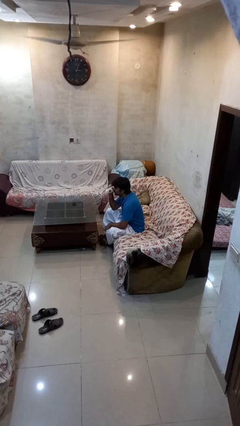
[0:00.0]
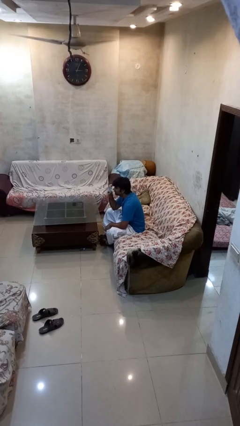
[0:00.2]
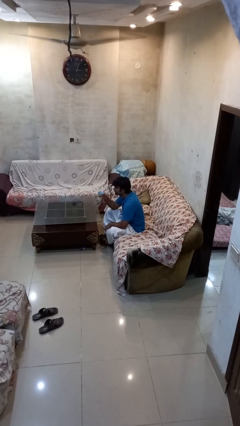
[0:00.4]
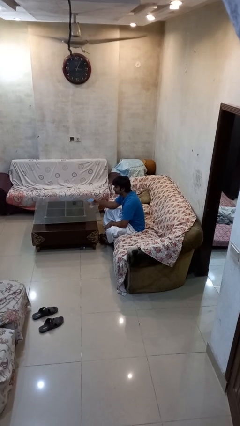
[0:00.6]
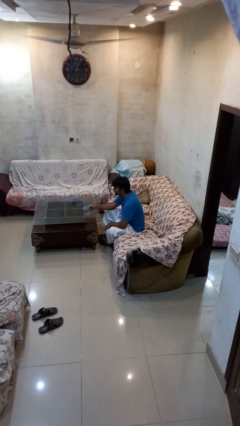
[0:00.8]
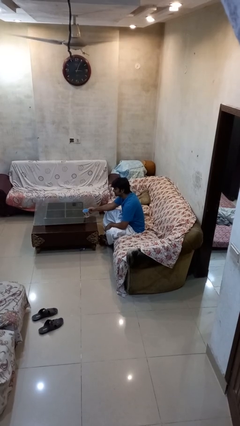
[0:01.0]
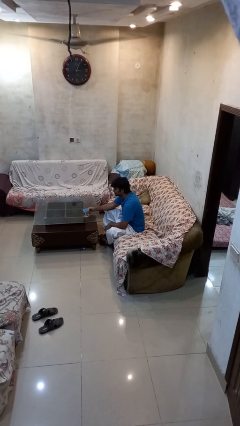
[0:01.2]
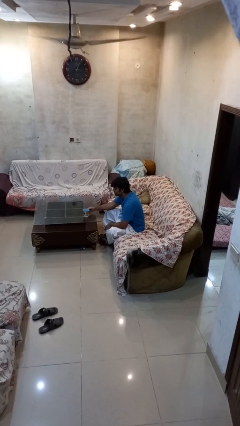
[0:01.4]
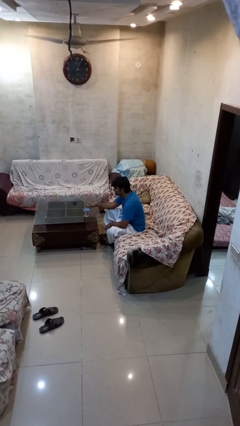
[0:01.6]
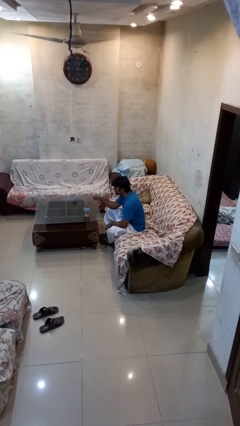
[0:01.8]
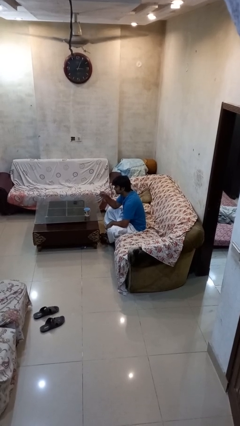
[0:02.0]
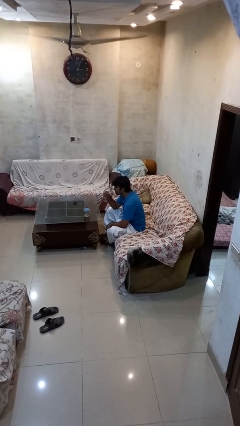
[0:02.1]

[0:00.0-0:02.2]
person puts down object on table

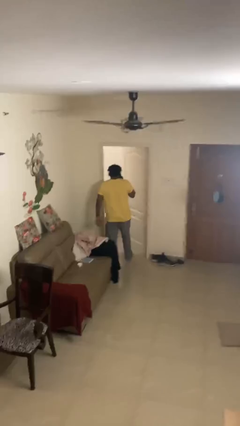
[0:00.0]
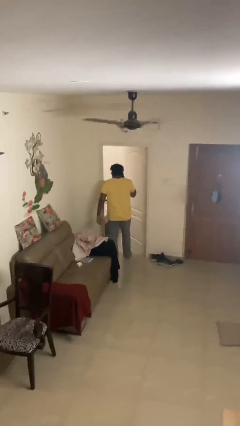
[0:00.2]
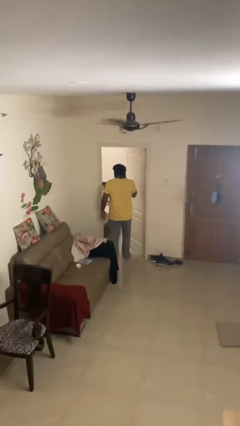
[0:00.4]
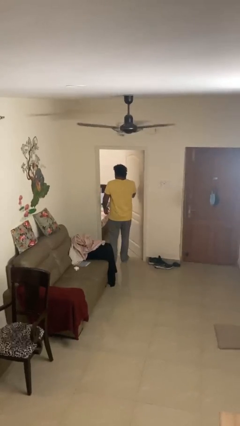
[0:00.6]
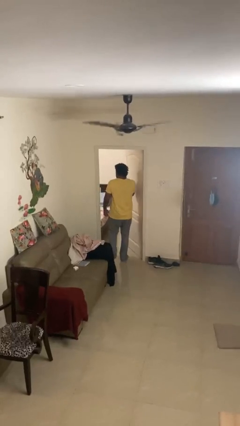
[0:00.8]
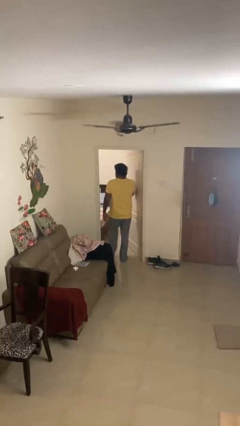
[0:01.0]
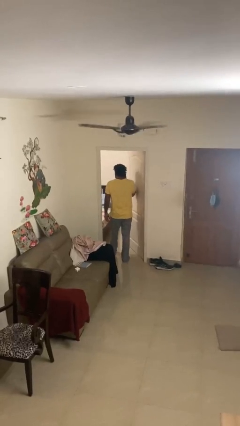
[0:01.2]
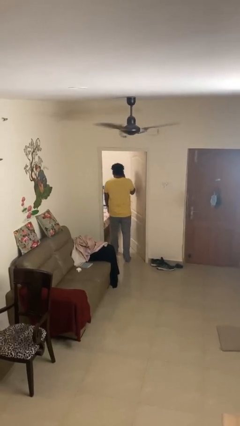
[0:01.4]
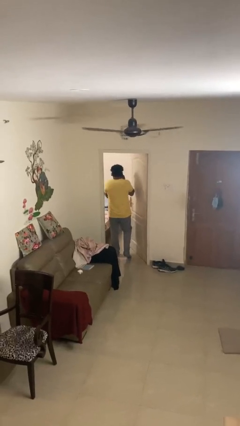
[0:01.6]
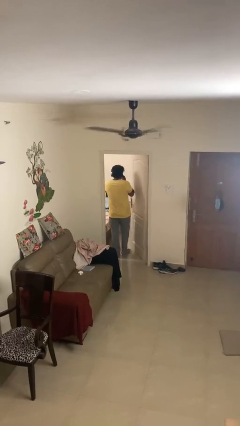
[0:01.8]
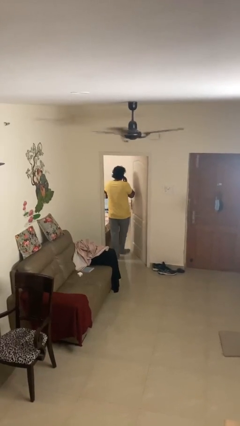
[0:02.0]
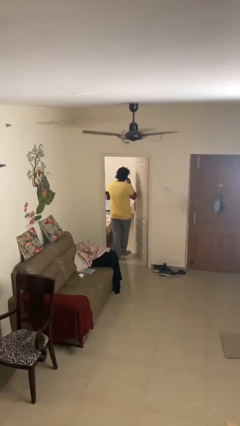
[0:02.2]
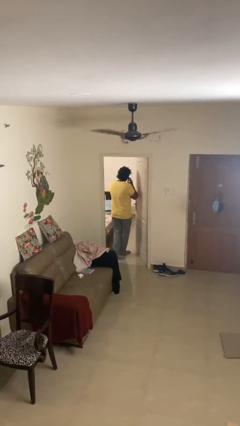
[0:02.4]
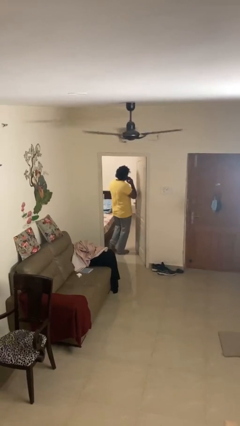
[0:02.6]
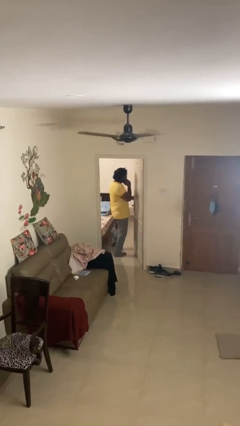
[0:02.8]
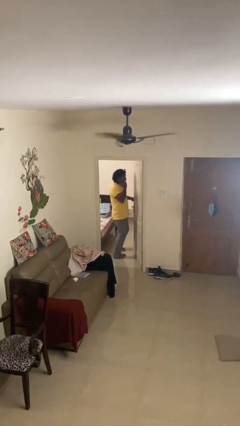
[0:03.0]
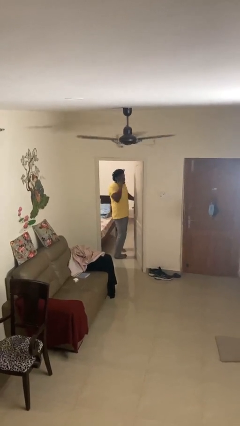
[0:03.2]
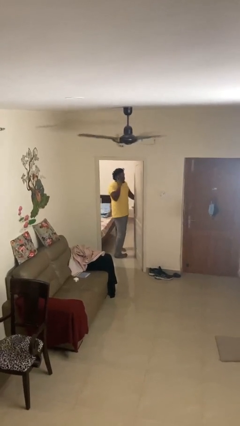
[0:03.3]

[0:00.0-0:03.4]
person exits scene through structure

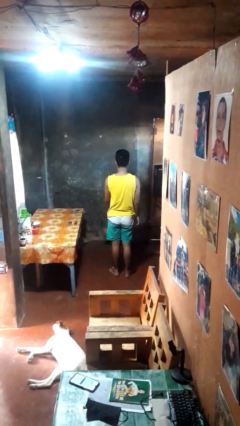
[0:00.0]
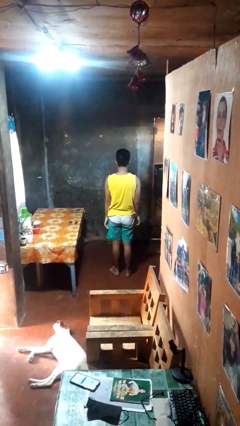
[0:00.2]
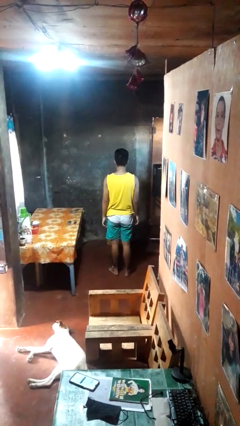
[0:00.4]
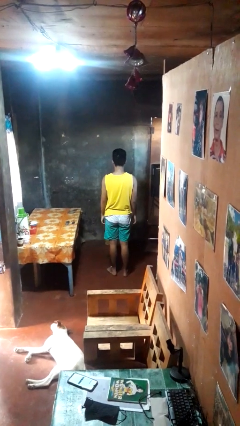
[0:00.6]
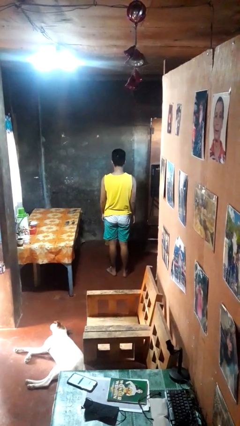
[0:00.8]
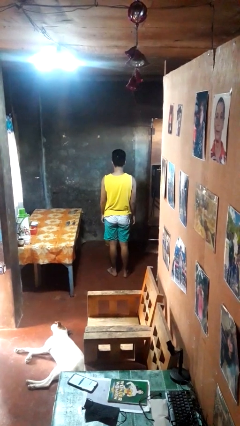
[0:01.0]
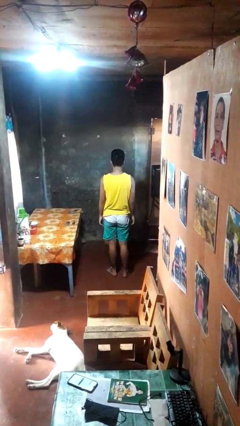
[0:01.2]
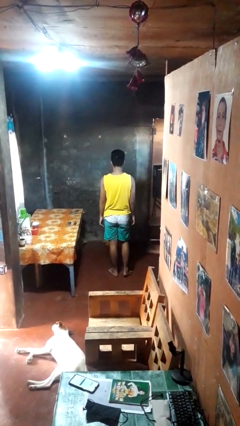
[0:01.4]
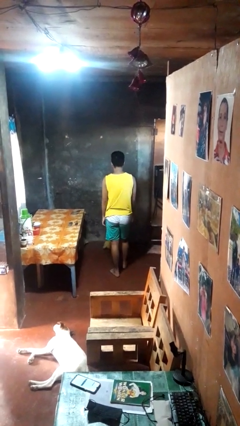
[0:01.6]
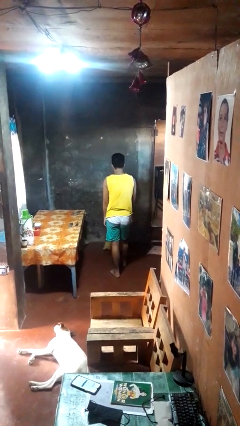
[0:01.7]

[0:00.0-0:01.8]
person throws object to ground

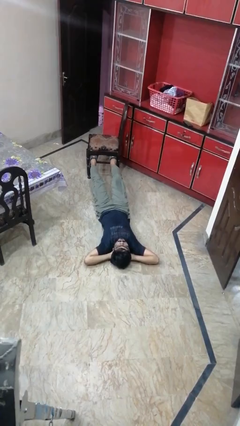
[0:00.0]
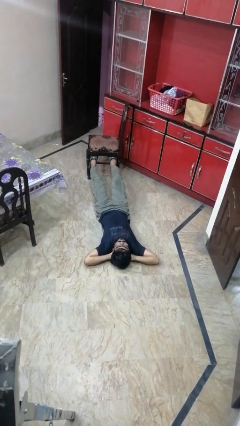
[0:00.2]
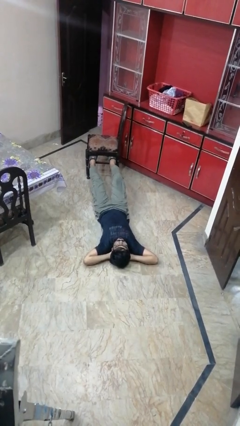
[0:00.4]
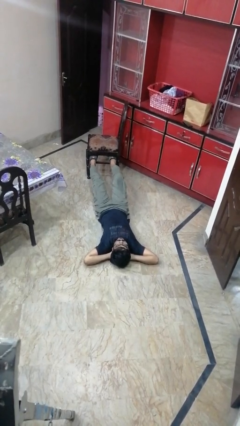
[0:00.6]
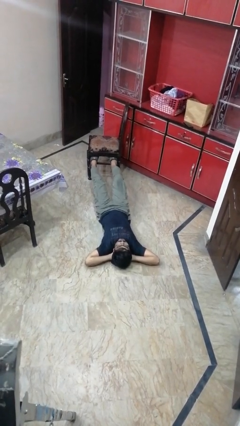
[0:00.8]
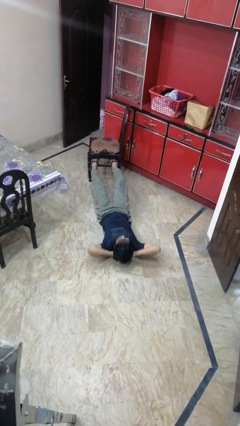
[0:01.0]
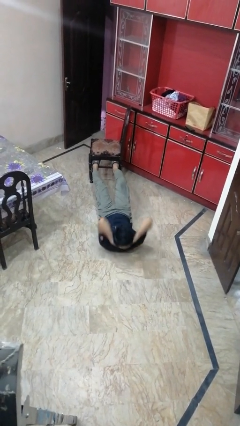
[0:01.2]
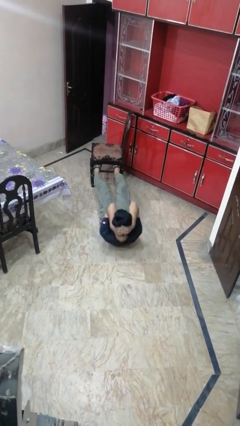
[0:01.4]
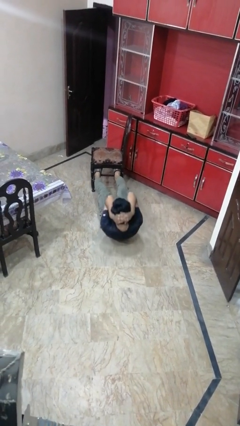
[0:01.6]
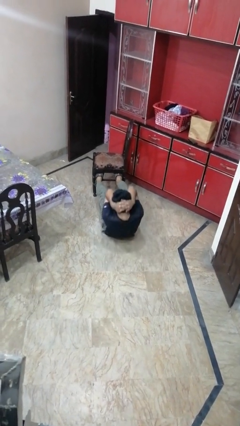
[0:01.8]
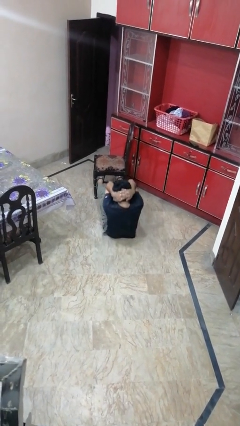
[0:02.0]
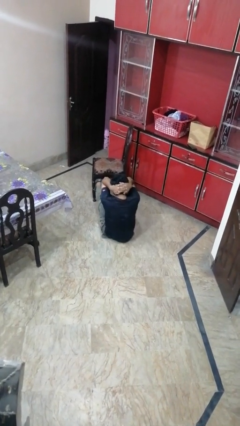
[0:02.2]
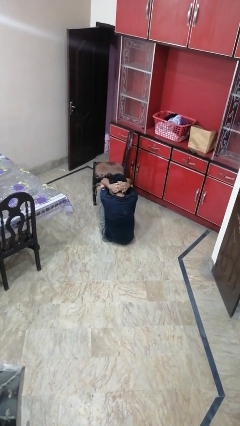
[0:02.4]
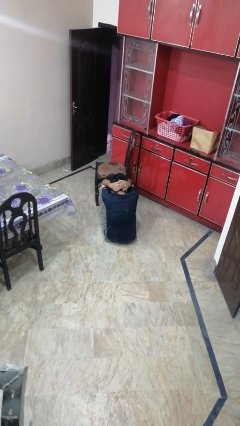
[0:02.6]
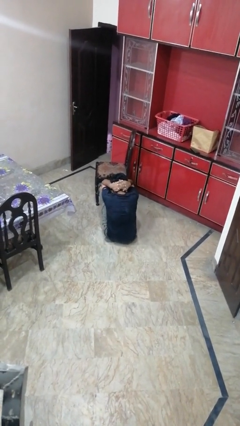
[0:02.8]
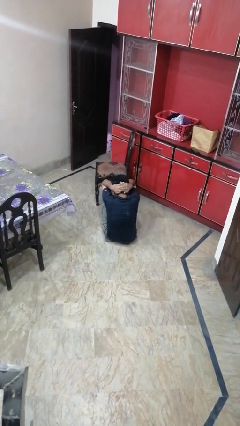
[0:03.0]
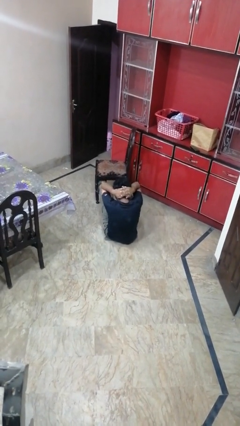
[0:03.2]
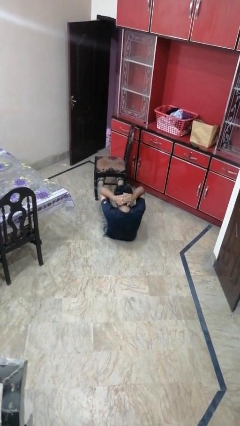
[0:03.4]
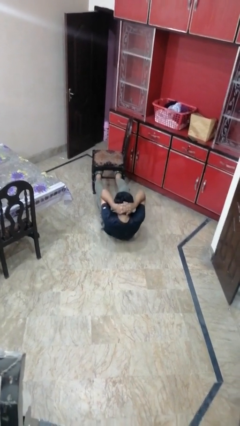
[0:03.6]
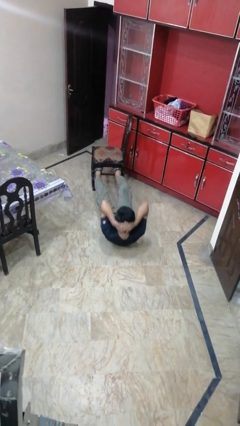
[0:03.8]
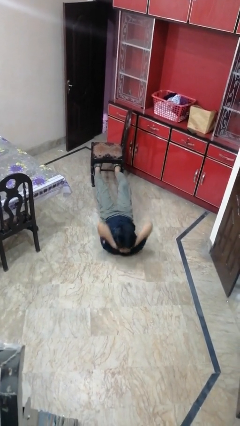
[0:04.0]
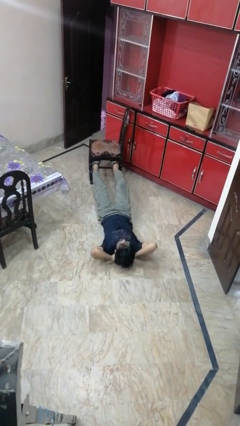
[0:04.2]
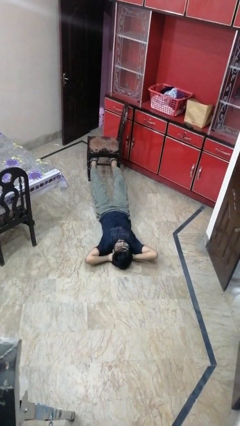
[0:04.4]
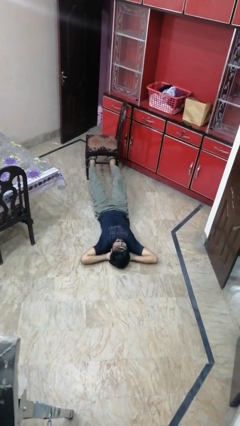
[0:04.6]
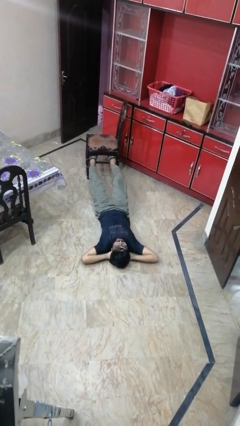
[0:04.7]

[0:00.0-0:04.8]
person exercises with situp

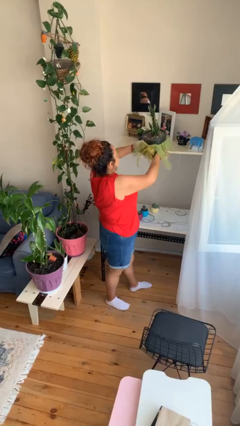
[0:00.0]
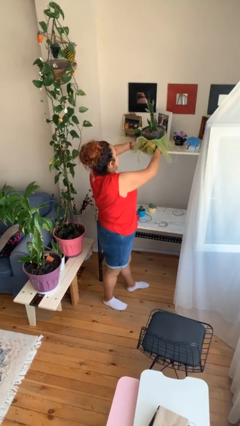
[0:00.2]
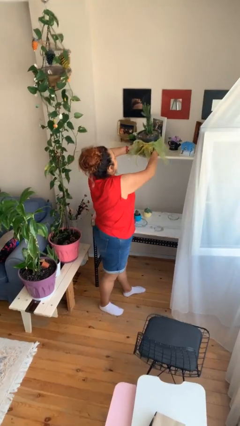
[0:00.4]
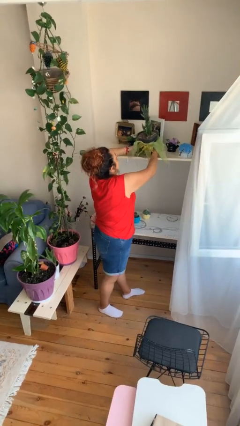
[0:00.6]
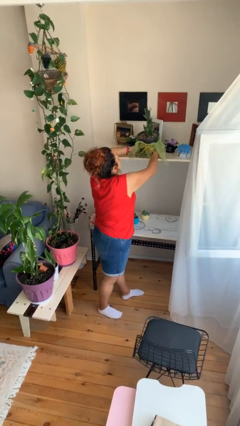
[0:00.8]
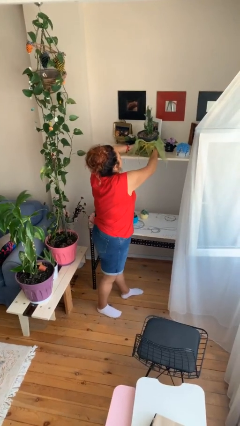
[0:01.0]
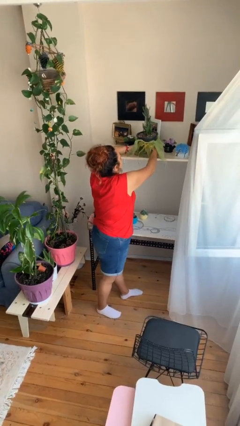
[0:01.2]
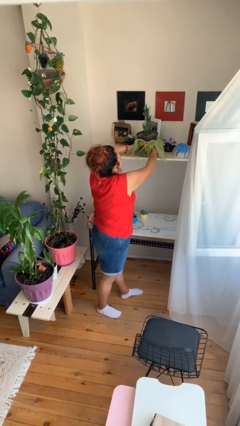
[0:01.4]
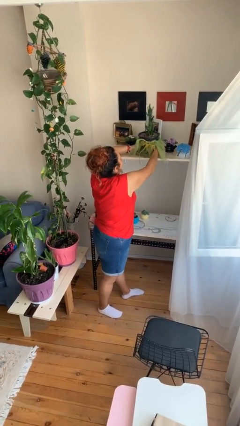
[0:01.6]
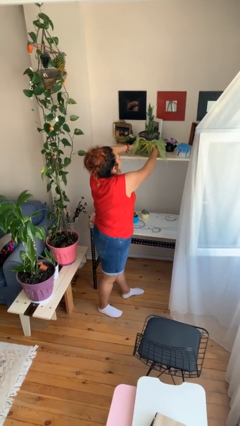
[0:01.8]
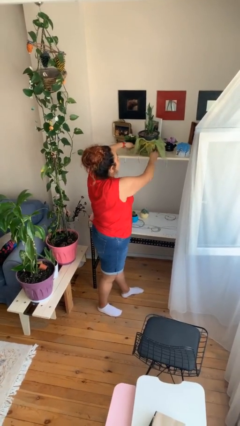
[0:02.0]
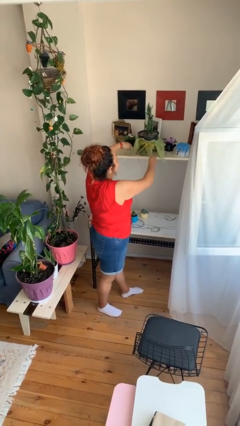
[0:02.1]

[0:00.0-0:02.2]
person puts down object on shelf

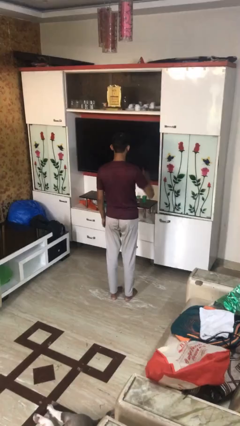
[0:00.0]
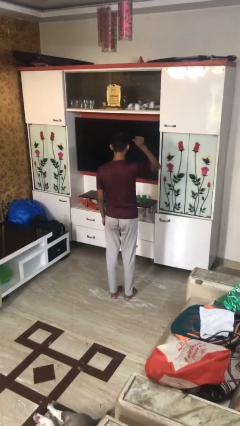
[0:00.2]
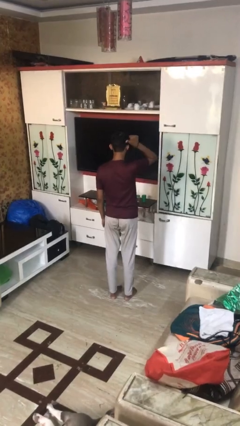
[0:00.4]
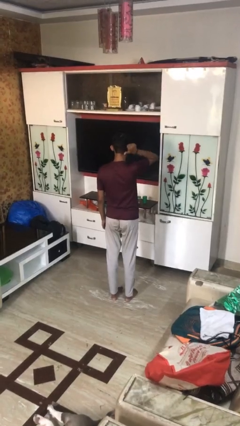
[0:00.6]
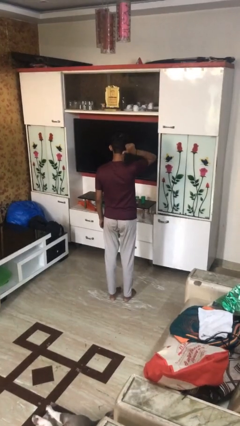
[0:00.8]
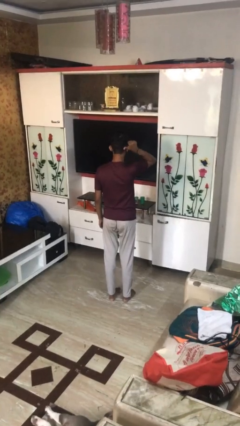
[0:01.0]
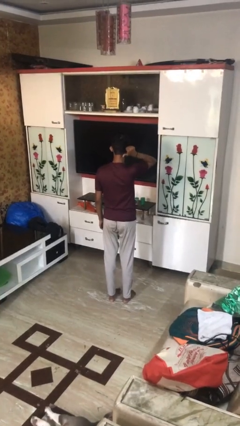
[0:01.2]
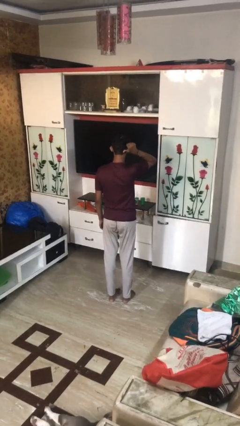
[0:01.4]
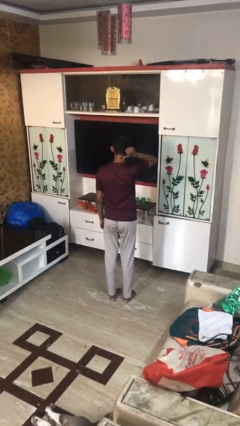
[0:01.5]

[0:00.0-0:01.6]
person gestures behind me

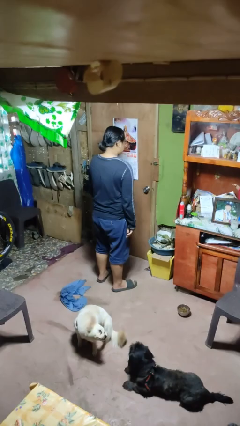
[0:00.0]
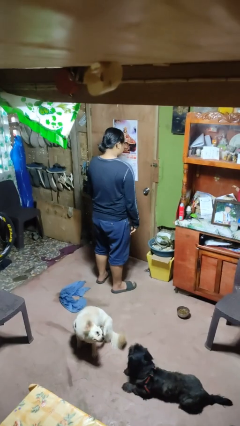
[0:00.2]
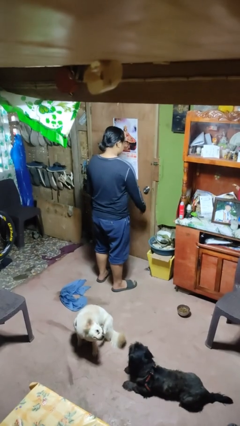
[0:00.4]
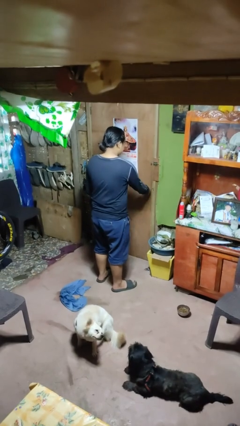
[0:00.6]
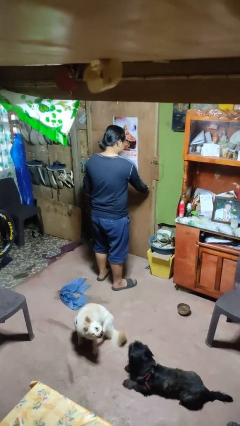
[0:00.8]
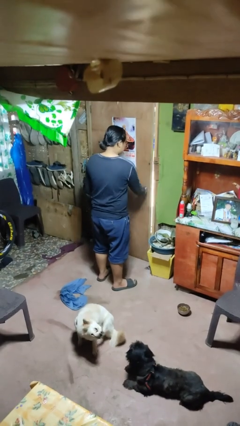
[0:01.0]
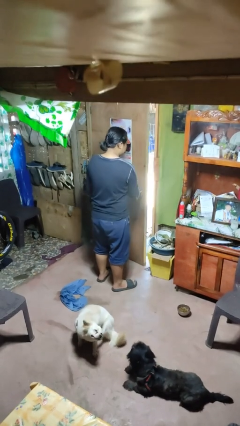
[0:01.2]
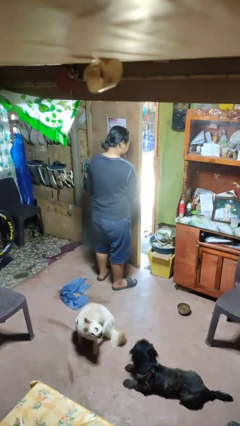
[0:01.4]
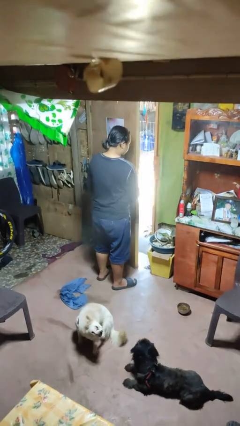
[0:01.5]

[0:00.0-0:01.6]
person opens facility door
